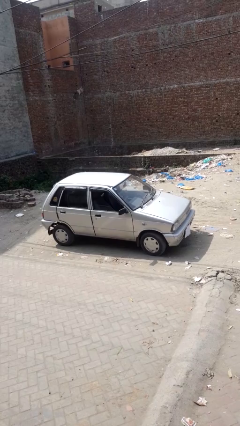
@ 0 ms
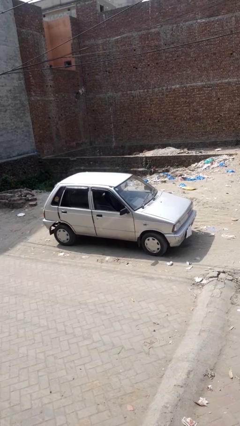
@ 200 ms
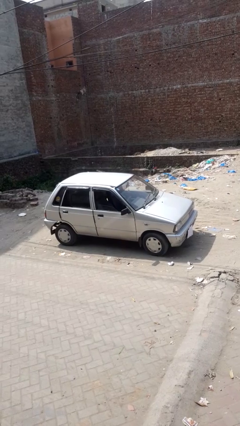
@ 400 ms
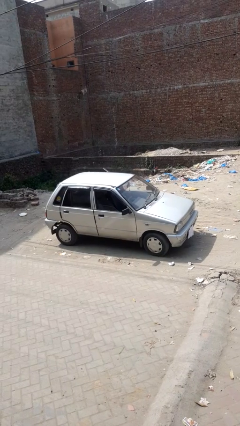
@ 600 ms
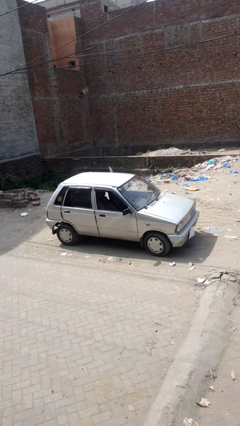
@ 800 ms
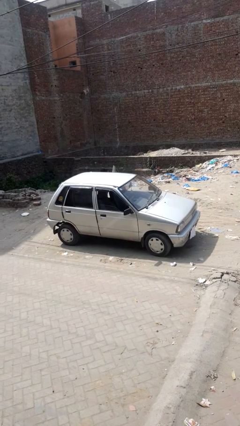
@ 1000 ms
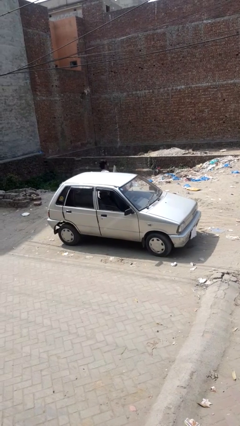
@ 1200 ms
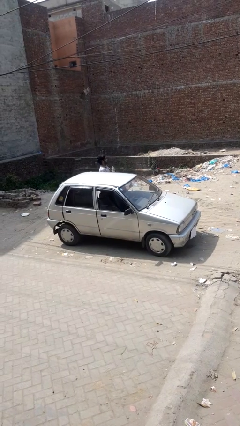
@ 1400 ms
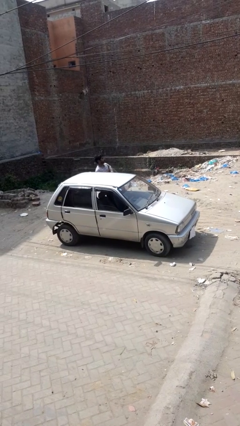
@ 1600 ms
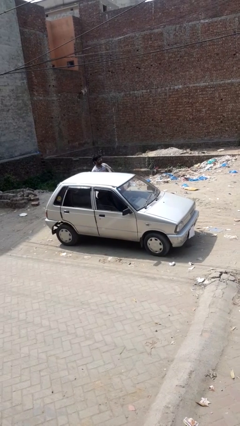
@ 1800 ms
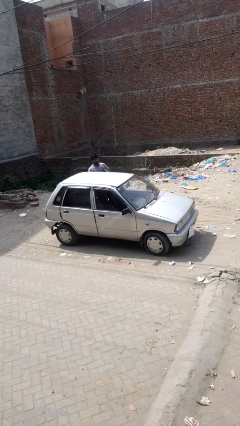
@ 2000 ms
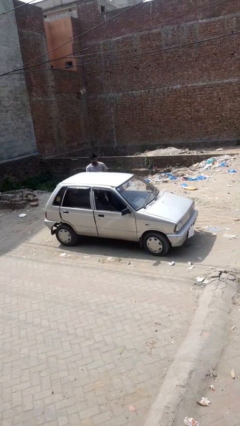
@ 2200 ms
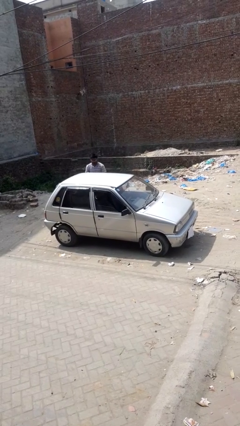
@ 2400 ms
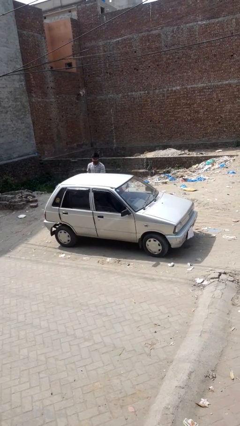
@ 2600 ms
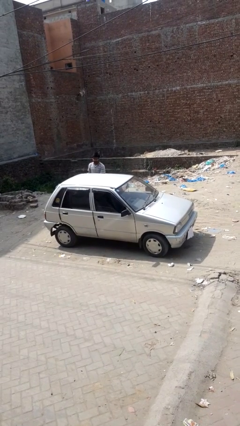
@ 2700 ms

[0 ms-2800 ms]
car drops off person

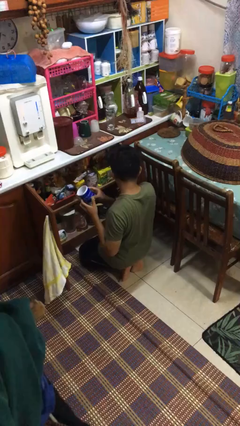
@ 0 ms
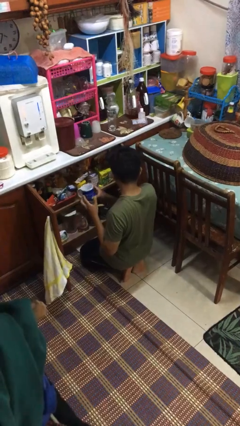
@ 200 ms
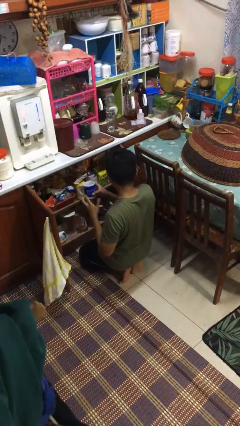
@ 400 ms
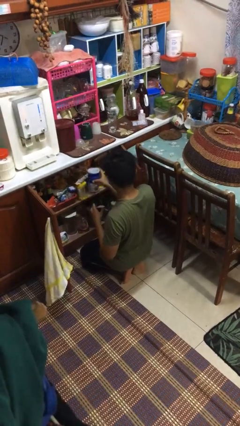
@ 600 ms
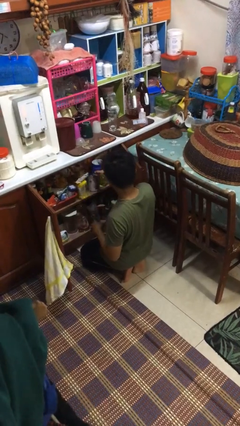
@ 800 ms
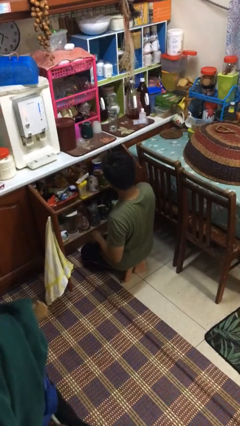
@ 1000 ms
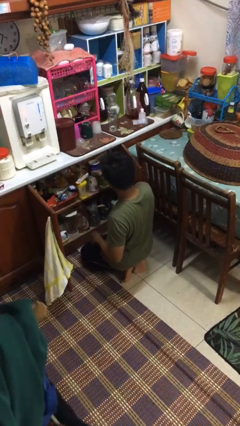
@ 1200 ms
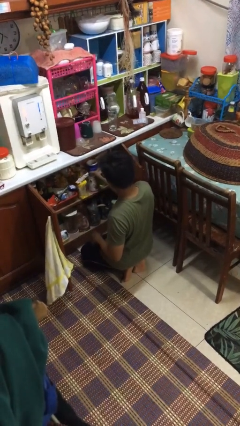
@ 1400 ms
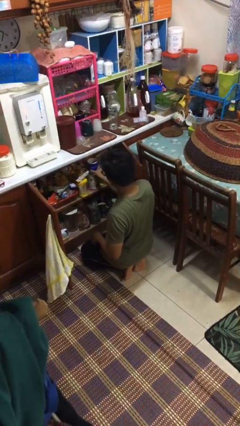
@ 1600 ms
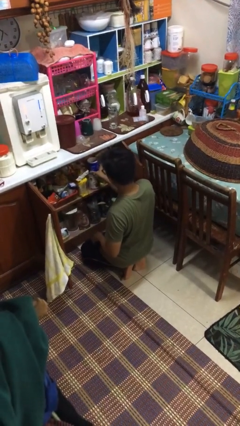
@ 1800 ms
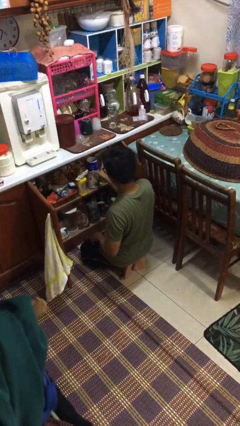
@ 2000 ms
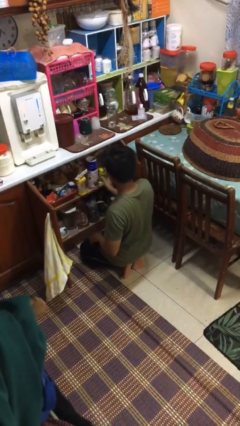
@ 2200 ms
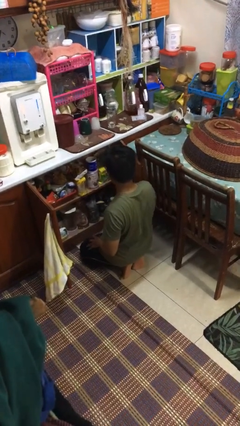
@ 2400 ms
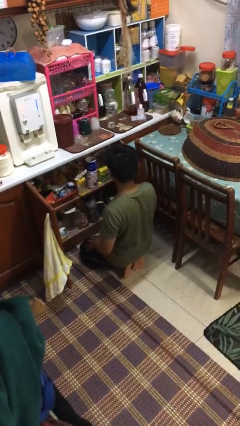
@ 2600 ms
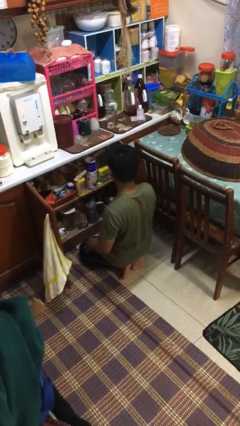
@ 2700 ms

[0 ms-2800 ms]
person puts object in cabinet

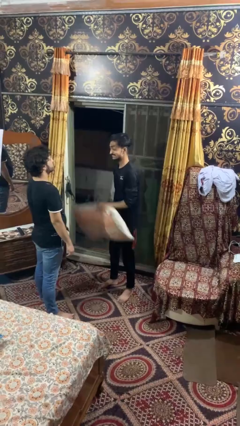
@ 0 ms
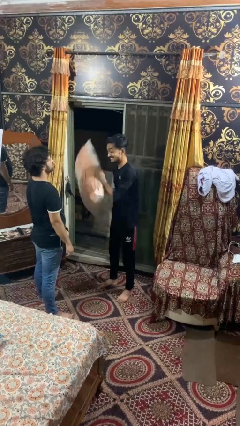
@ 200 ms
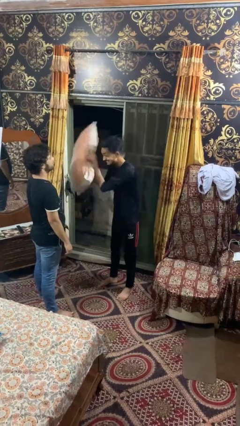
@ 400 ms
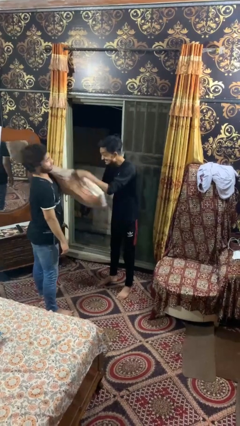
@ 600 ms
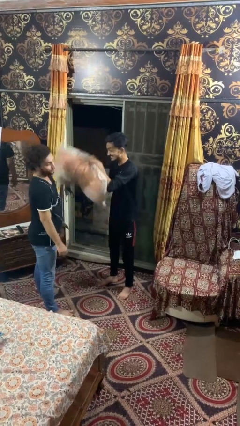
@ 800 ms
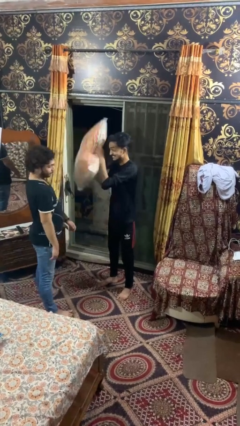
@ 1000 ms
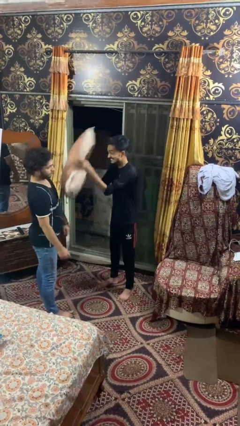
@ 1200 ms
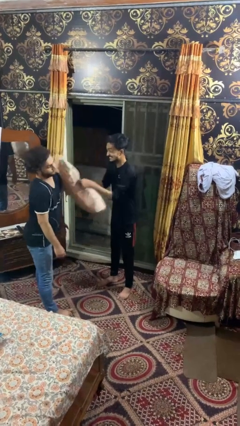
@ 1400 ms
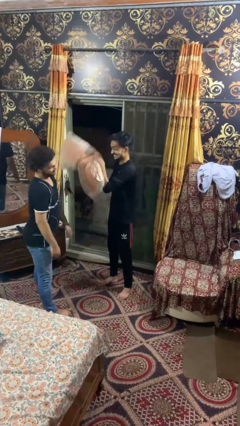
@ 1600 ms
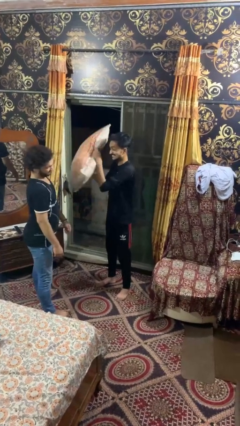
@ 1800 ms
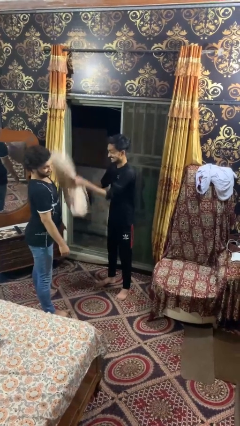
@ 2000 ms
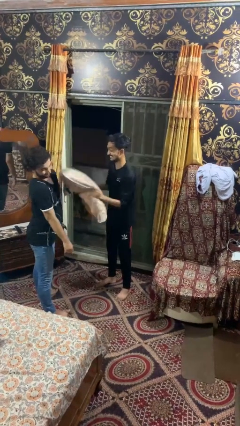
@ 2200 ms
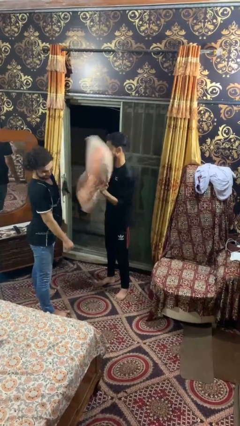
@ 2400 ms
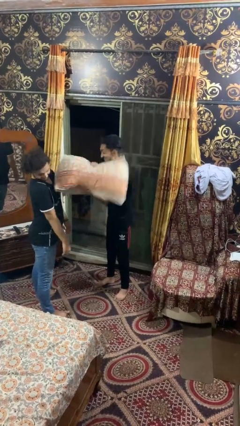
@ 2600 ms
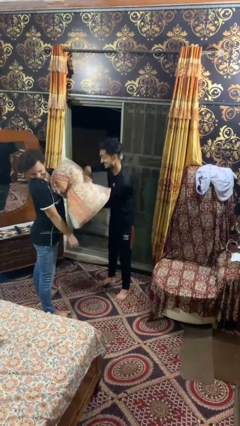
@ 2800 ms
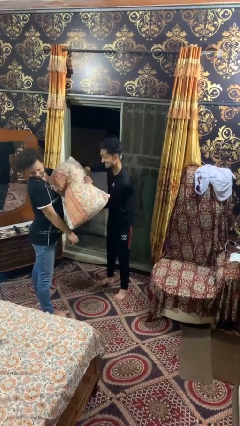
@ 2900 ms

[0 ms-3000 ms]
person hits person with pillow

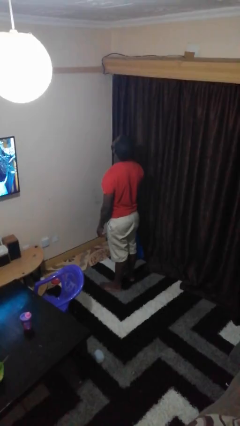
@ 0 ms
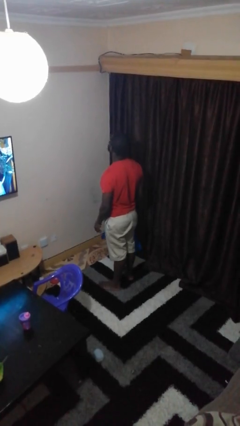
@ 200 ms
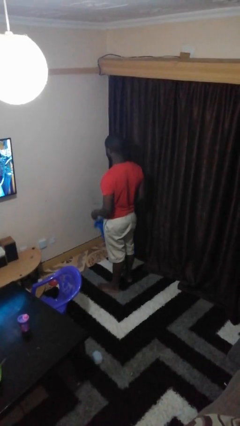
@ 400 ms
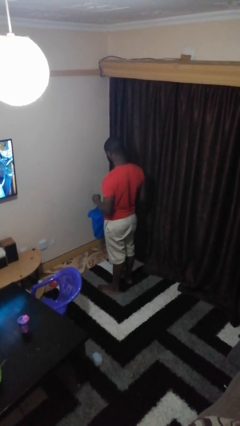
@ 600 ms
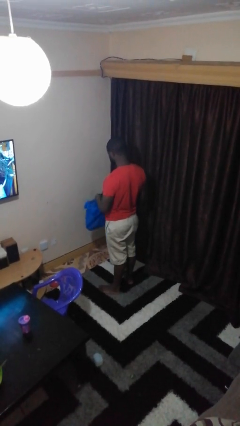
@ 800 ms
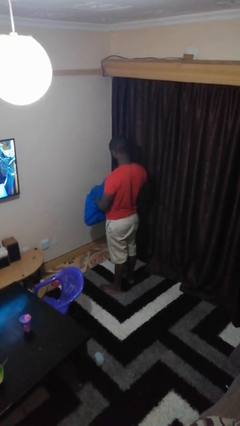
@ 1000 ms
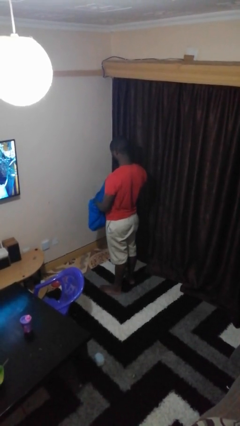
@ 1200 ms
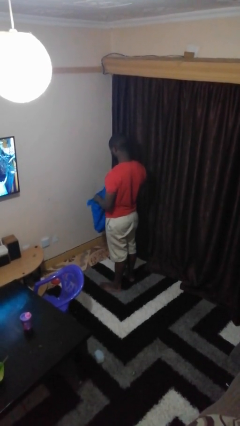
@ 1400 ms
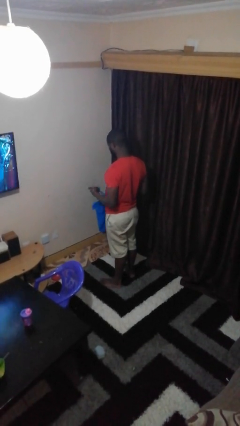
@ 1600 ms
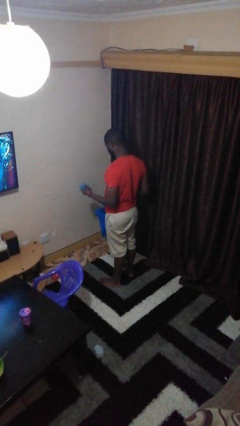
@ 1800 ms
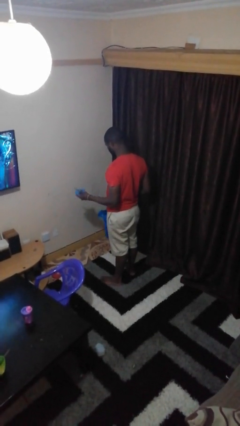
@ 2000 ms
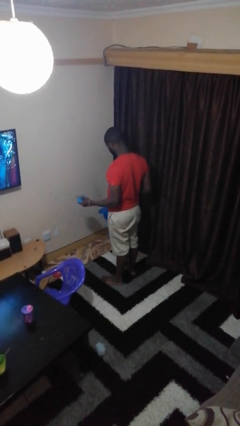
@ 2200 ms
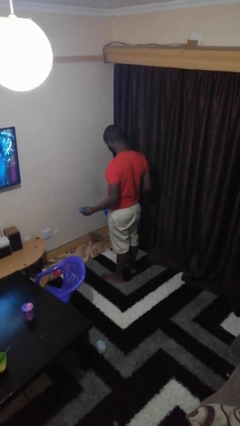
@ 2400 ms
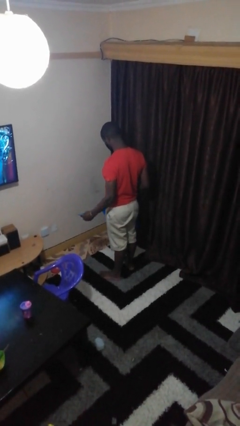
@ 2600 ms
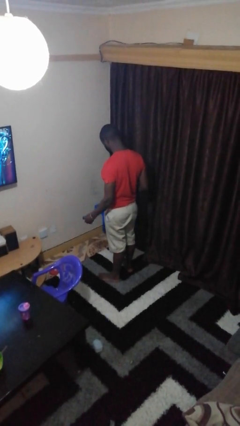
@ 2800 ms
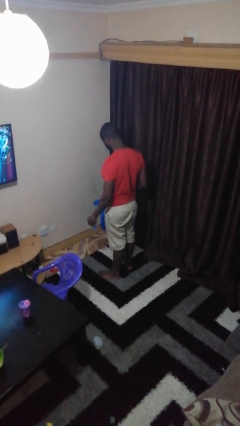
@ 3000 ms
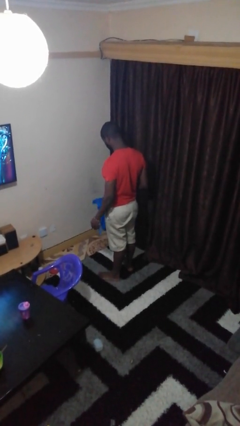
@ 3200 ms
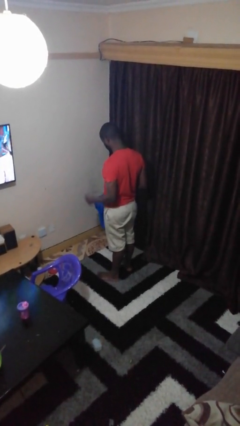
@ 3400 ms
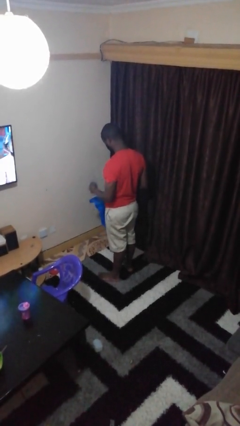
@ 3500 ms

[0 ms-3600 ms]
person takes object from bag

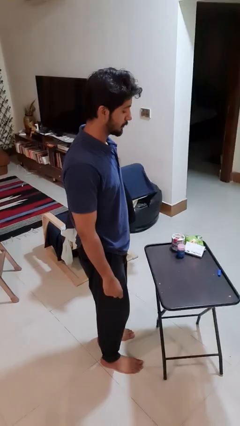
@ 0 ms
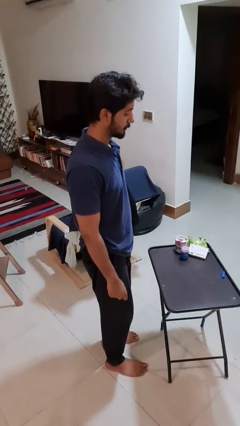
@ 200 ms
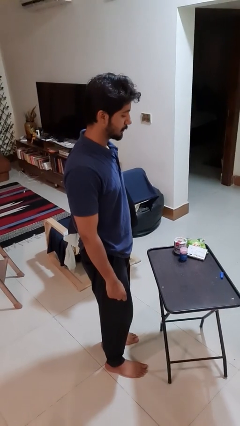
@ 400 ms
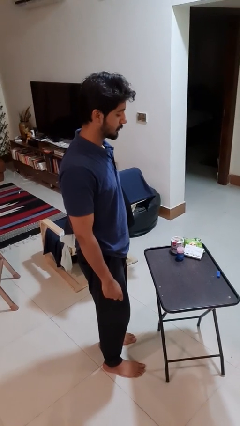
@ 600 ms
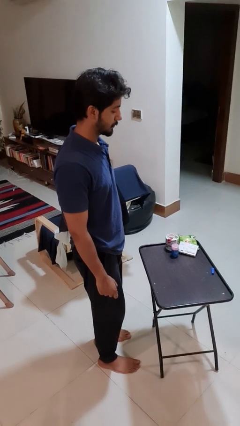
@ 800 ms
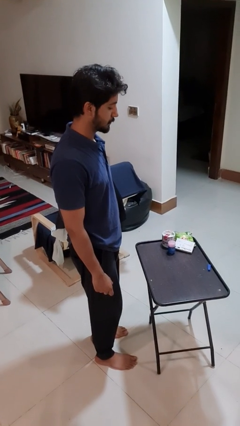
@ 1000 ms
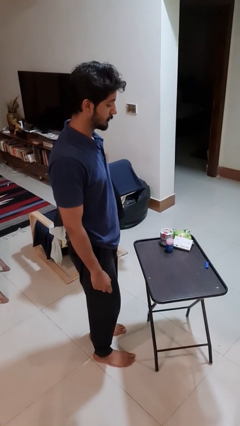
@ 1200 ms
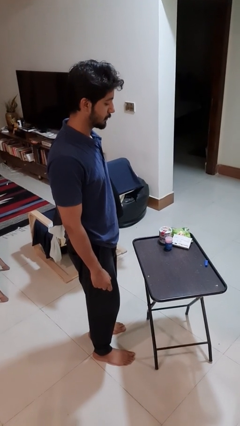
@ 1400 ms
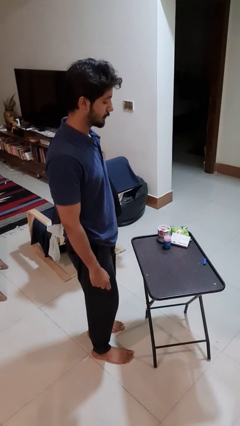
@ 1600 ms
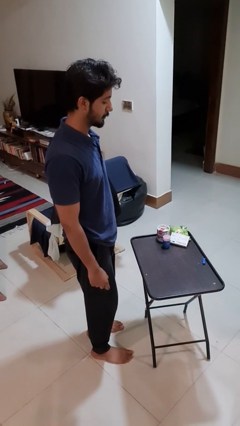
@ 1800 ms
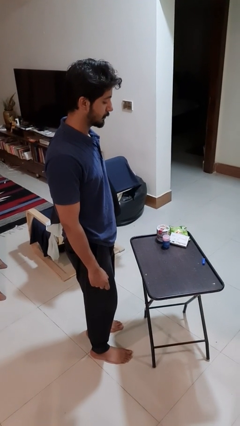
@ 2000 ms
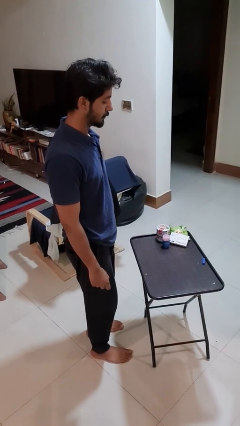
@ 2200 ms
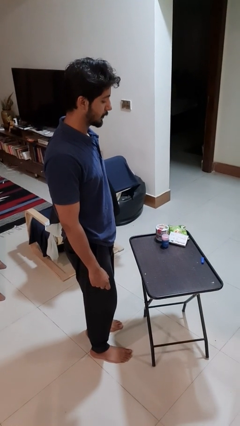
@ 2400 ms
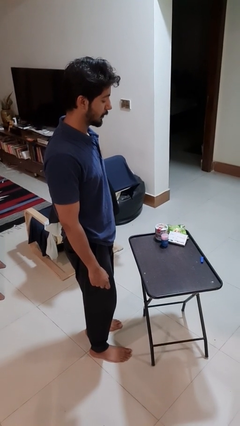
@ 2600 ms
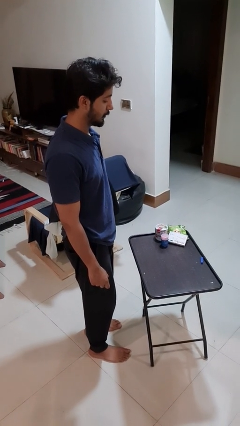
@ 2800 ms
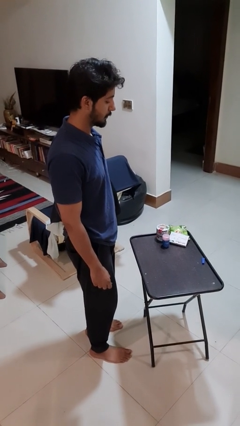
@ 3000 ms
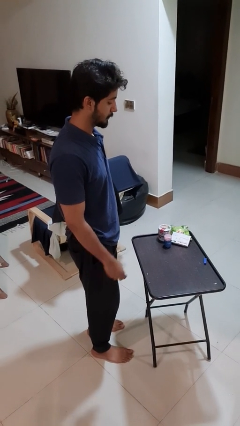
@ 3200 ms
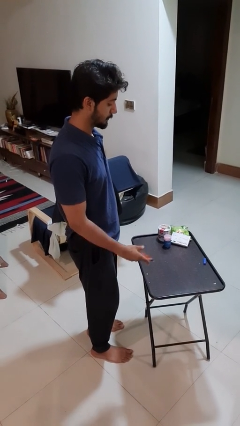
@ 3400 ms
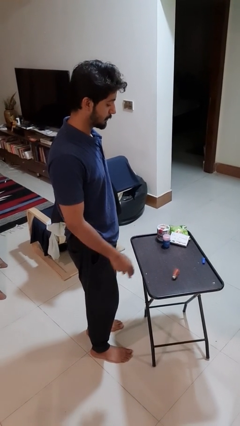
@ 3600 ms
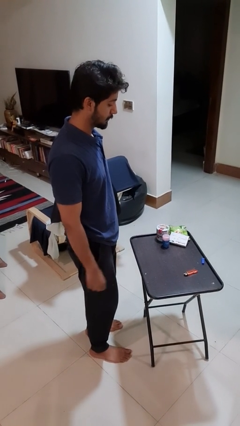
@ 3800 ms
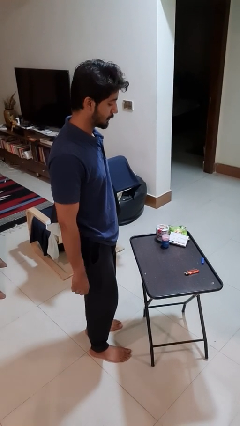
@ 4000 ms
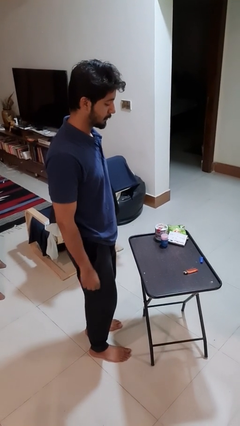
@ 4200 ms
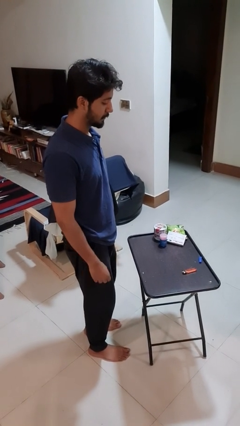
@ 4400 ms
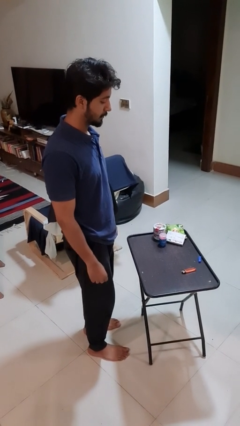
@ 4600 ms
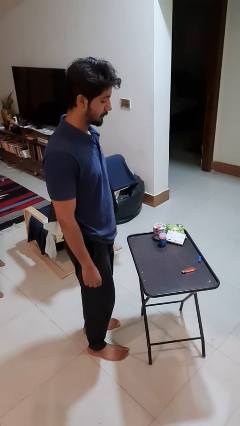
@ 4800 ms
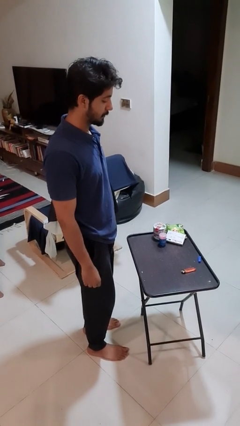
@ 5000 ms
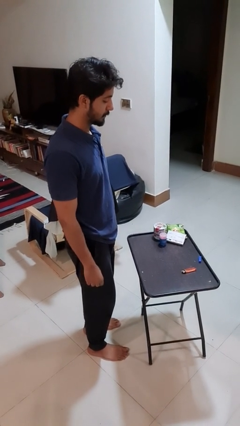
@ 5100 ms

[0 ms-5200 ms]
person throws object on table
